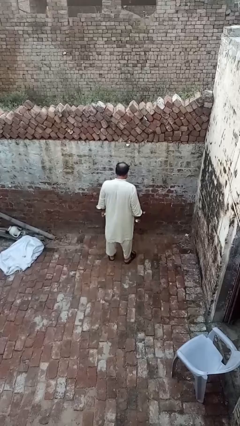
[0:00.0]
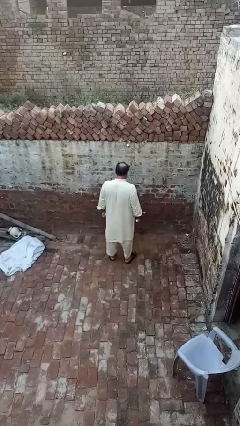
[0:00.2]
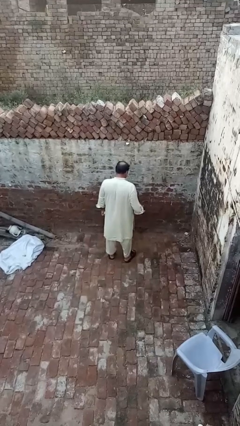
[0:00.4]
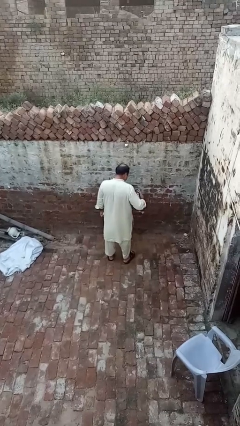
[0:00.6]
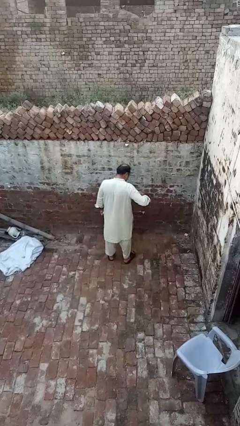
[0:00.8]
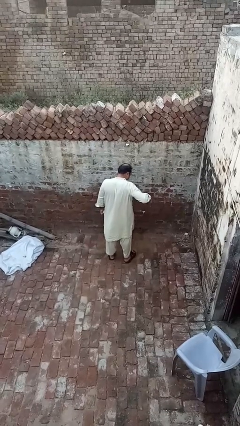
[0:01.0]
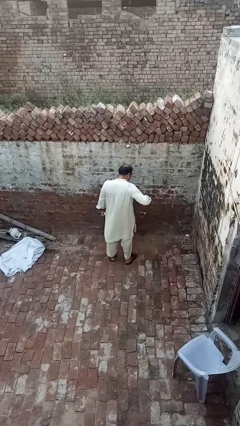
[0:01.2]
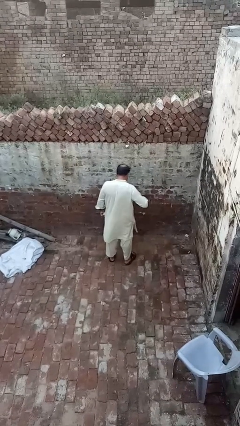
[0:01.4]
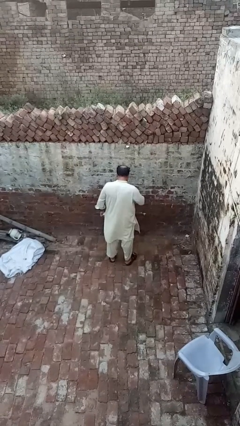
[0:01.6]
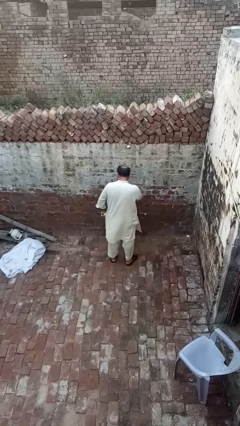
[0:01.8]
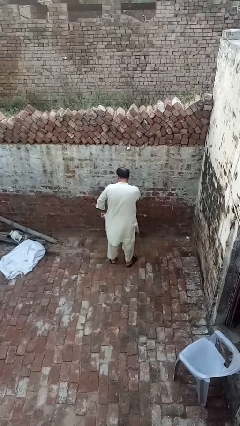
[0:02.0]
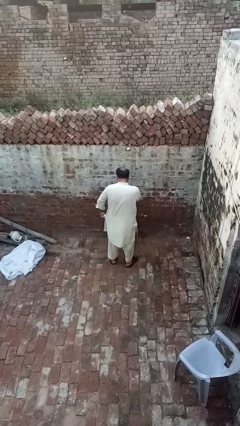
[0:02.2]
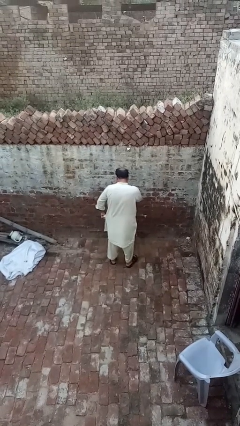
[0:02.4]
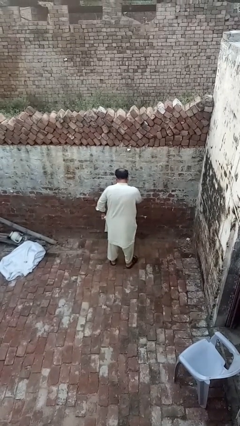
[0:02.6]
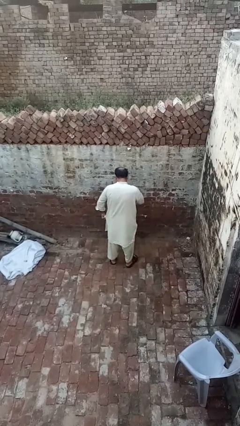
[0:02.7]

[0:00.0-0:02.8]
person applies deodorant

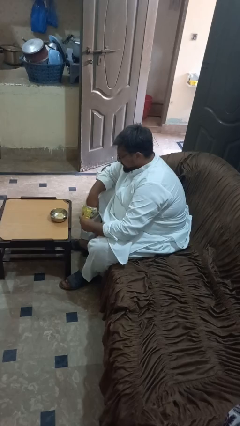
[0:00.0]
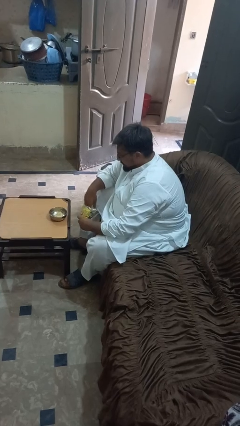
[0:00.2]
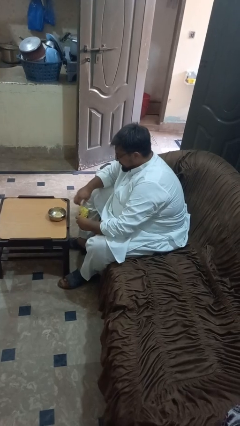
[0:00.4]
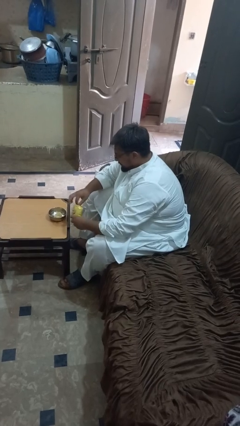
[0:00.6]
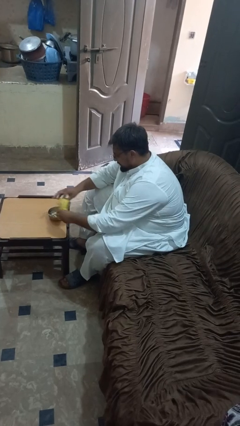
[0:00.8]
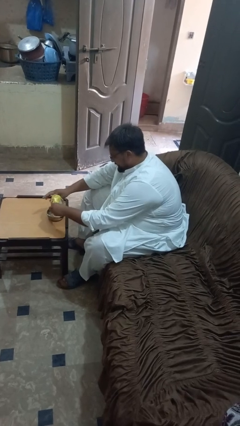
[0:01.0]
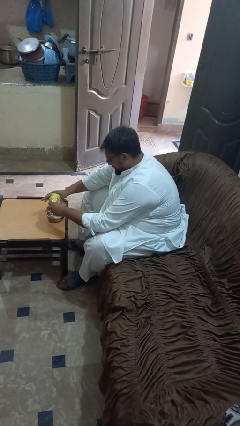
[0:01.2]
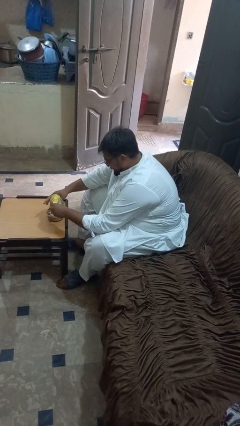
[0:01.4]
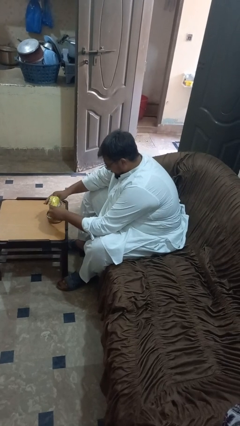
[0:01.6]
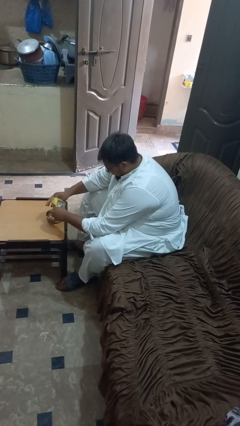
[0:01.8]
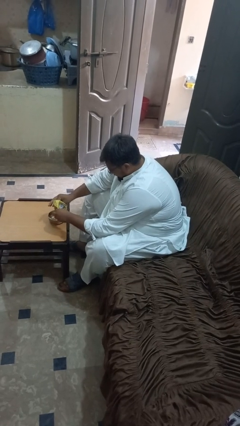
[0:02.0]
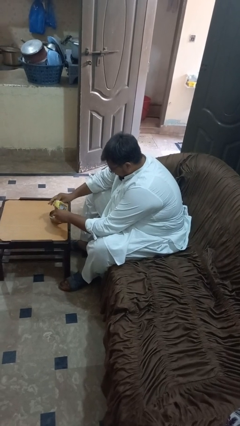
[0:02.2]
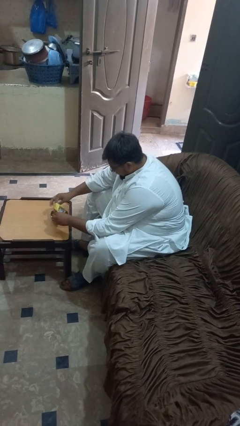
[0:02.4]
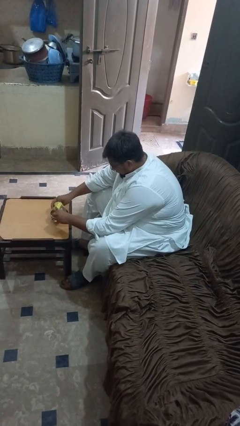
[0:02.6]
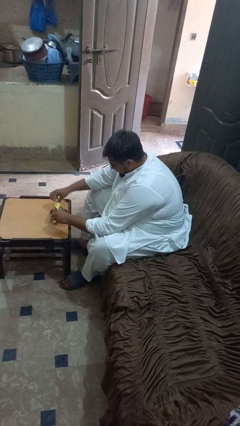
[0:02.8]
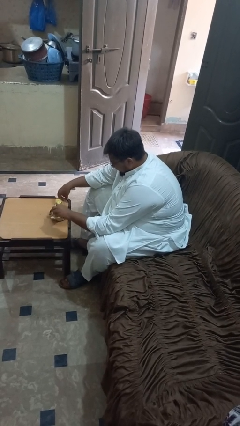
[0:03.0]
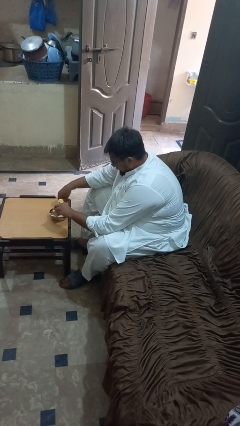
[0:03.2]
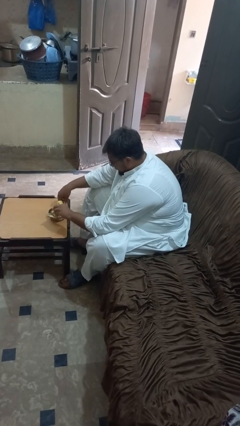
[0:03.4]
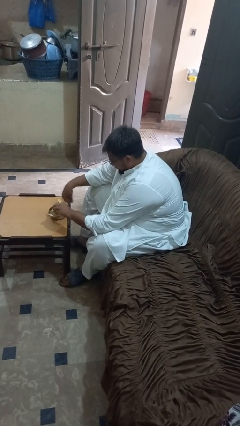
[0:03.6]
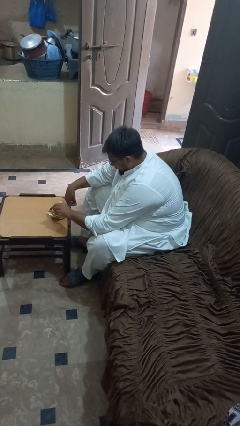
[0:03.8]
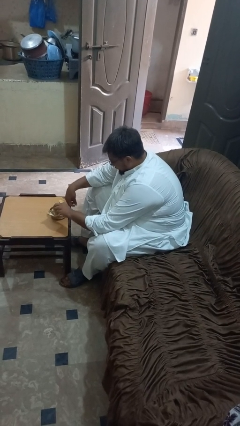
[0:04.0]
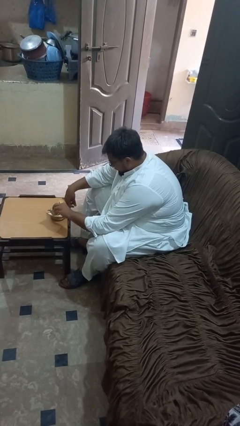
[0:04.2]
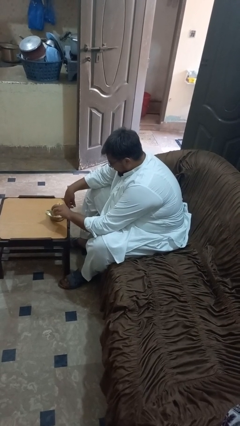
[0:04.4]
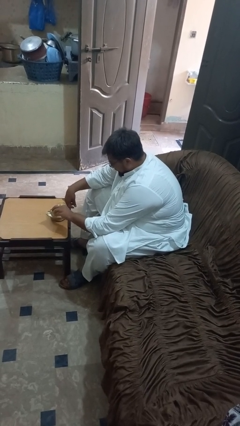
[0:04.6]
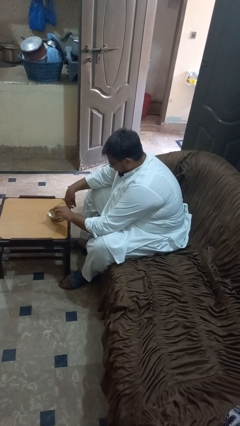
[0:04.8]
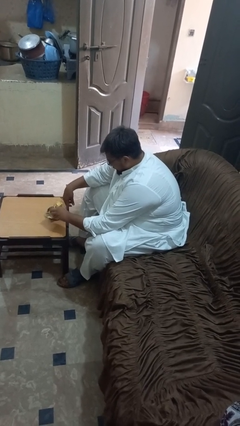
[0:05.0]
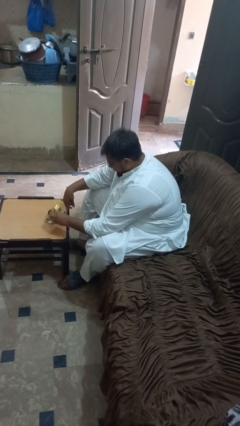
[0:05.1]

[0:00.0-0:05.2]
person pours into bowl

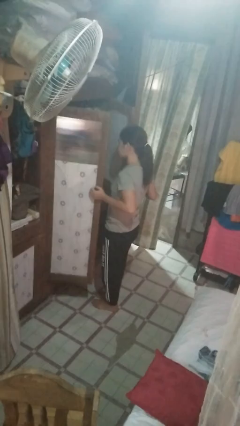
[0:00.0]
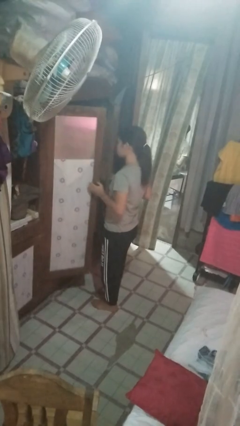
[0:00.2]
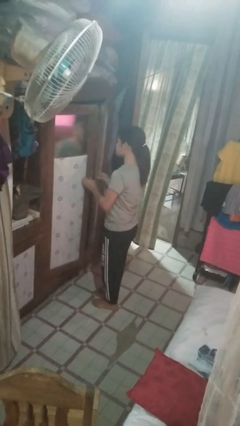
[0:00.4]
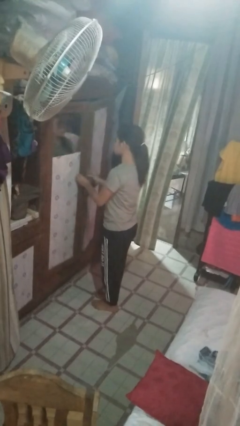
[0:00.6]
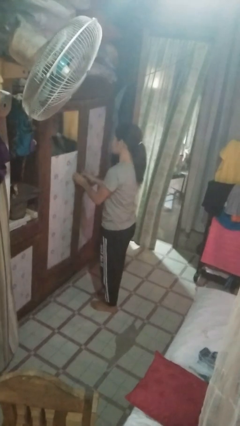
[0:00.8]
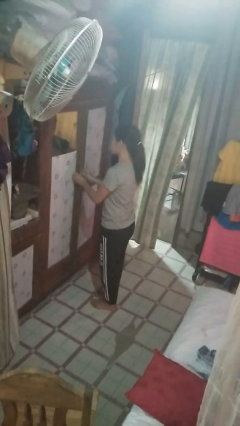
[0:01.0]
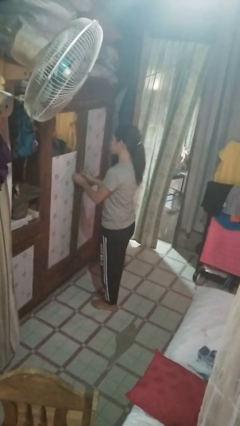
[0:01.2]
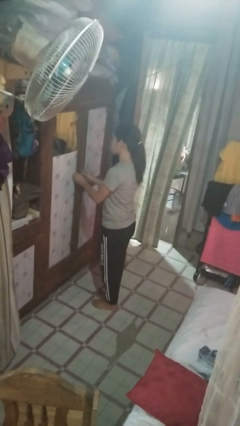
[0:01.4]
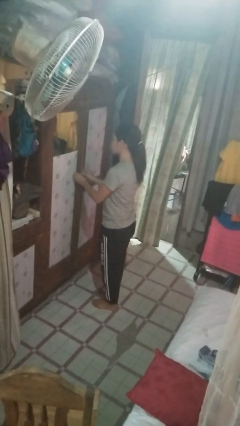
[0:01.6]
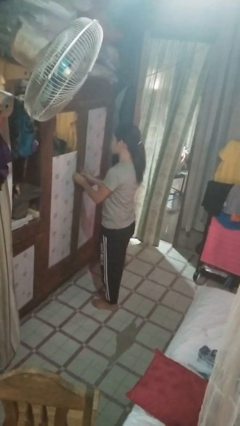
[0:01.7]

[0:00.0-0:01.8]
person closes closet door

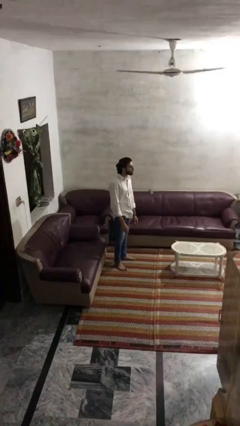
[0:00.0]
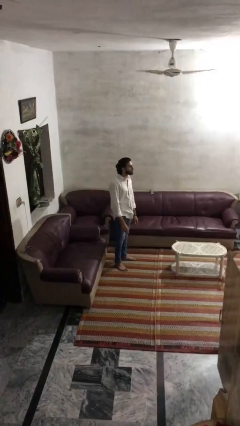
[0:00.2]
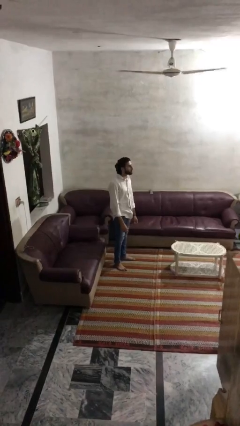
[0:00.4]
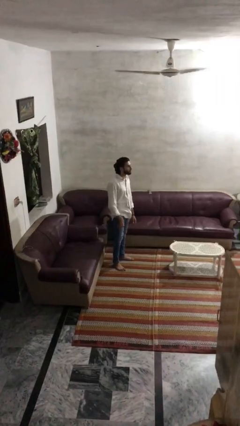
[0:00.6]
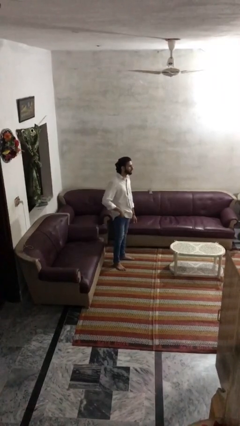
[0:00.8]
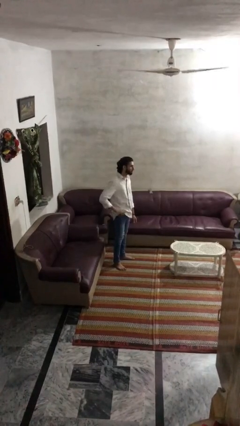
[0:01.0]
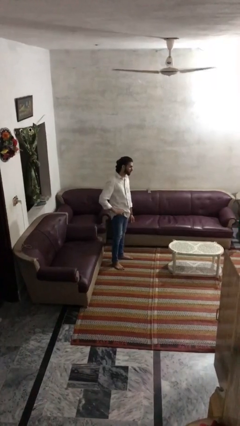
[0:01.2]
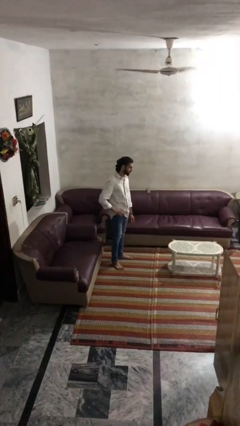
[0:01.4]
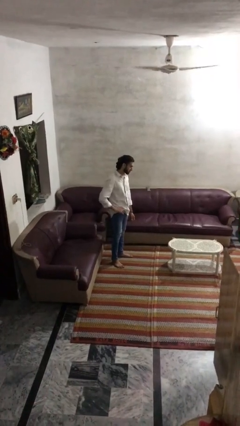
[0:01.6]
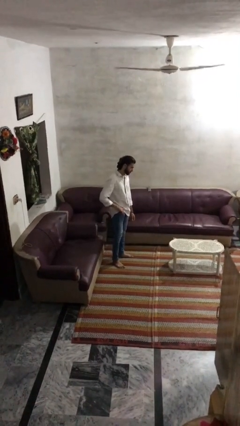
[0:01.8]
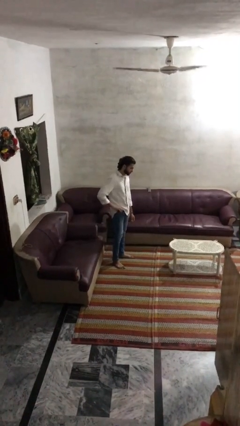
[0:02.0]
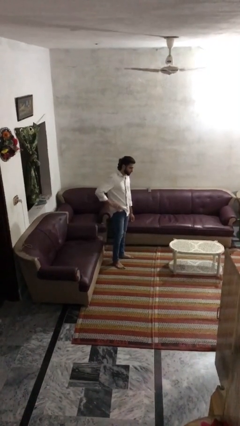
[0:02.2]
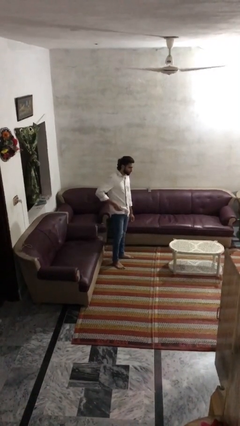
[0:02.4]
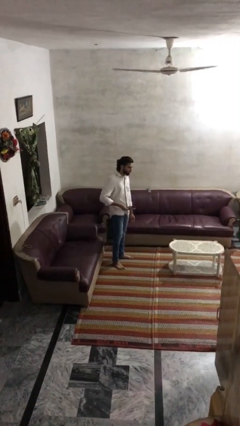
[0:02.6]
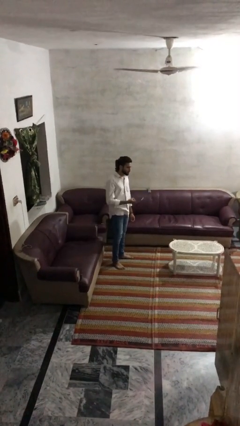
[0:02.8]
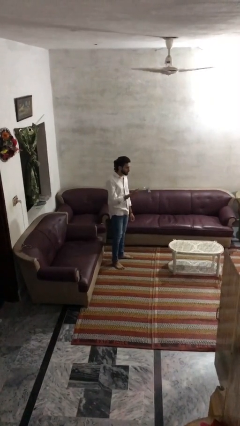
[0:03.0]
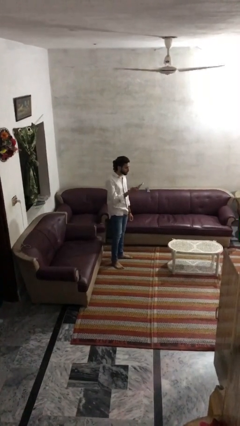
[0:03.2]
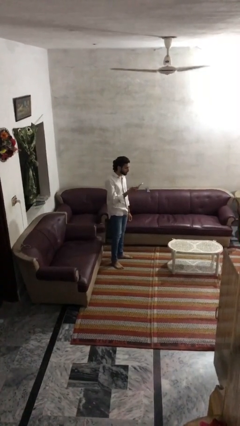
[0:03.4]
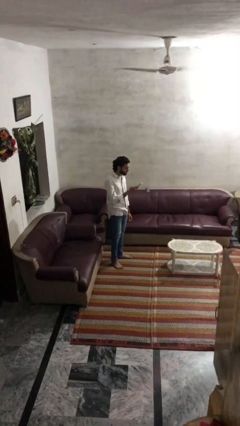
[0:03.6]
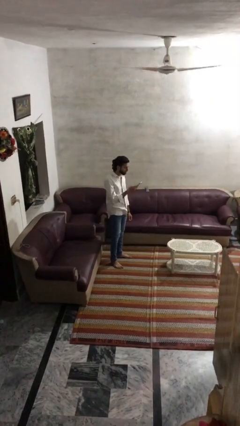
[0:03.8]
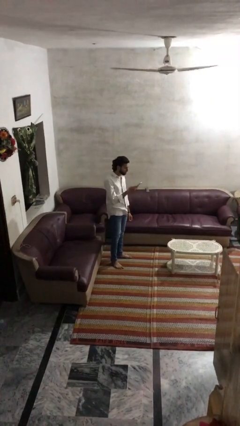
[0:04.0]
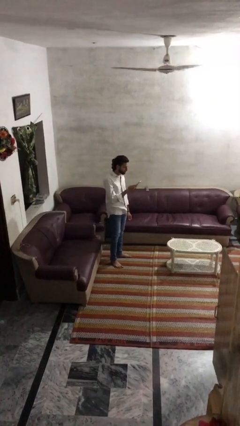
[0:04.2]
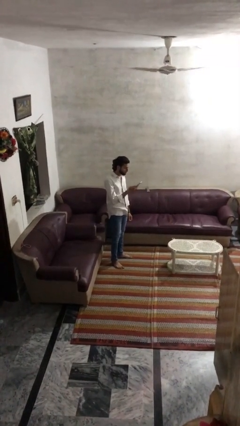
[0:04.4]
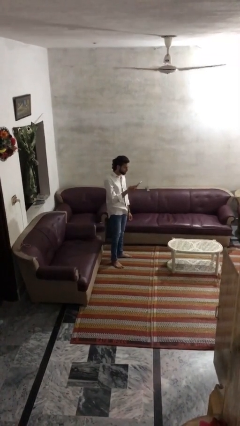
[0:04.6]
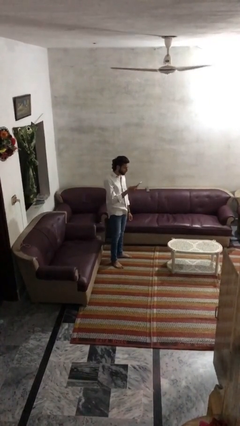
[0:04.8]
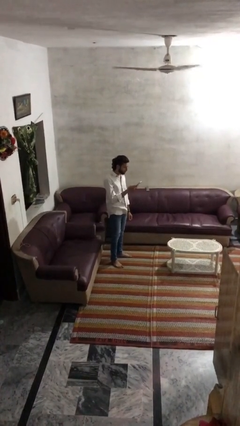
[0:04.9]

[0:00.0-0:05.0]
person takes phone from pocket

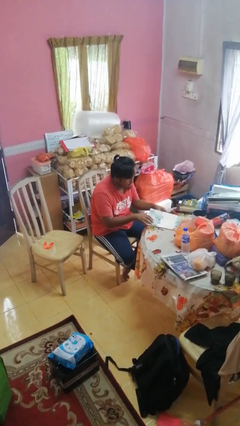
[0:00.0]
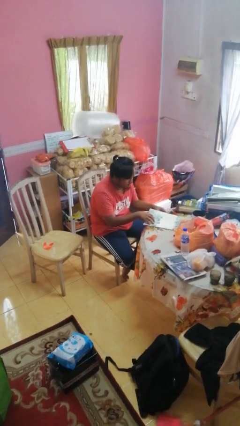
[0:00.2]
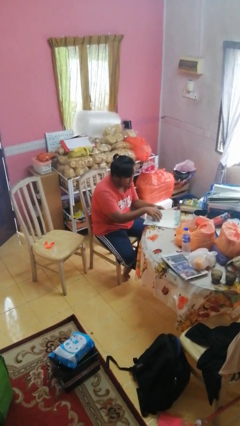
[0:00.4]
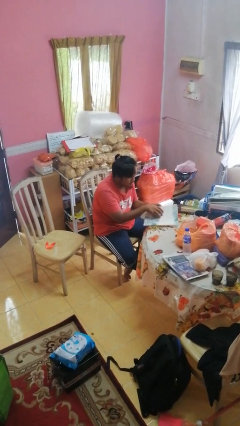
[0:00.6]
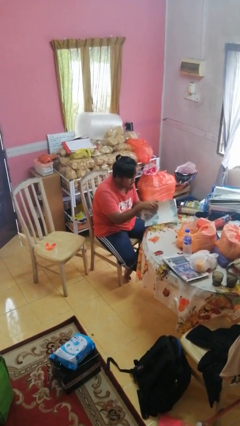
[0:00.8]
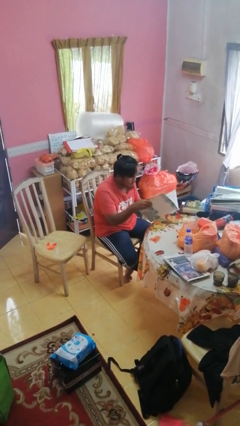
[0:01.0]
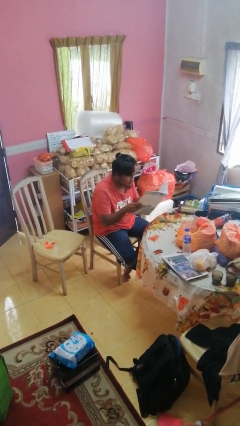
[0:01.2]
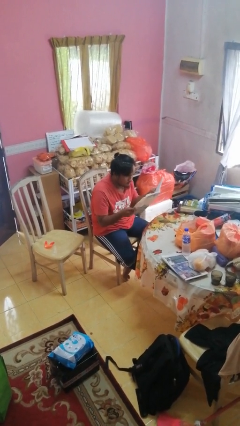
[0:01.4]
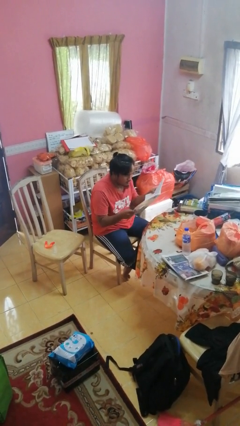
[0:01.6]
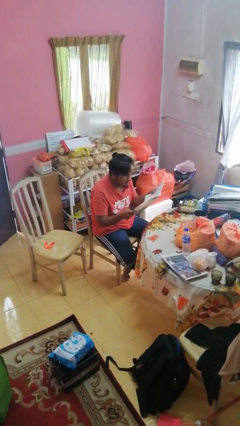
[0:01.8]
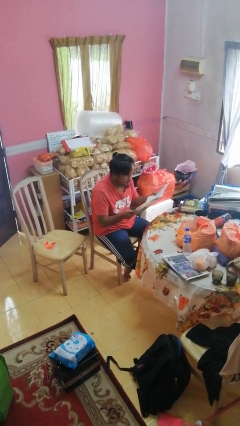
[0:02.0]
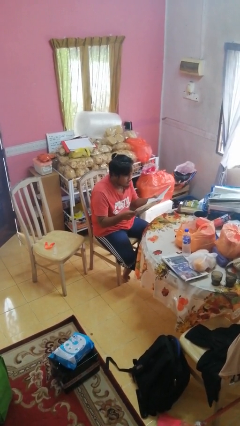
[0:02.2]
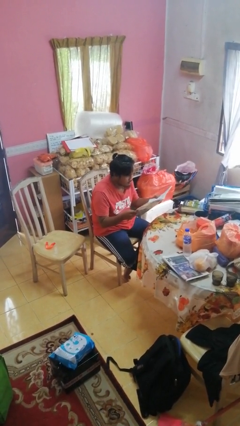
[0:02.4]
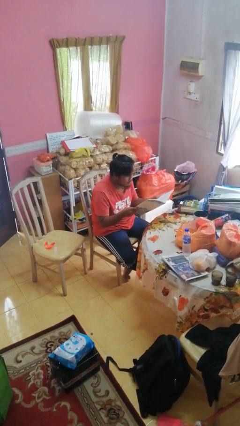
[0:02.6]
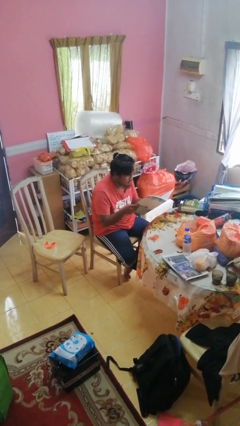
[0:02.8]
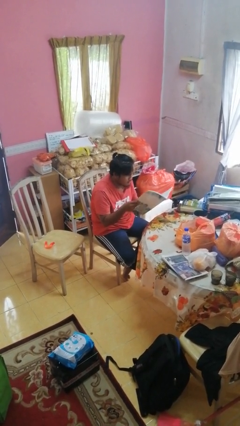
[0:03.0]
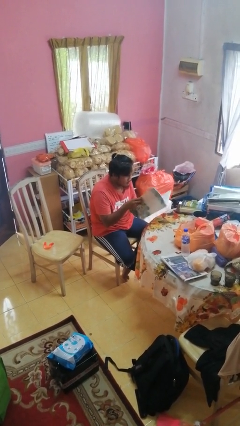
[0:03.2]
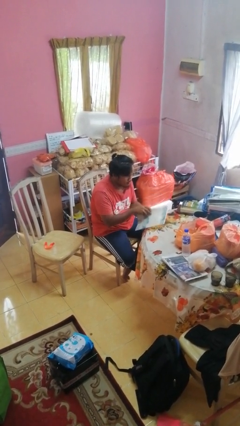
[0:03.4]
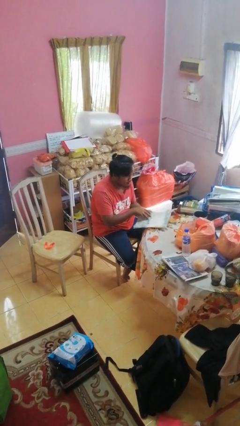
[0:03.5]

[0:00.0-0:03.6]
person reads magazine
